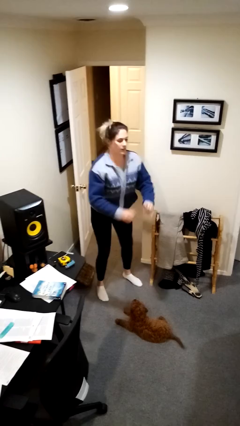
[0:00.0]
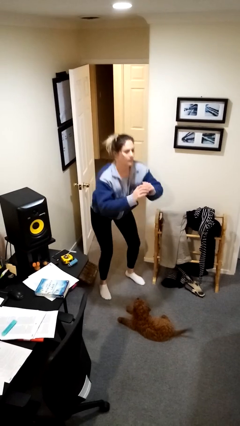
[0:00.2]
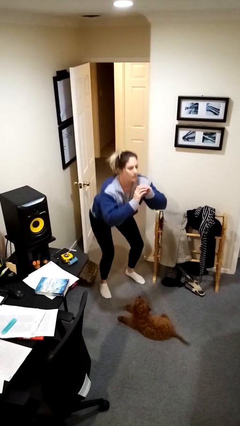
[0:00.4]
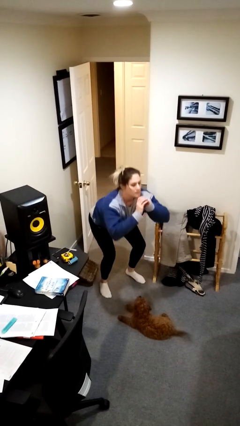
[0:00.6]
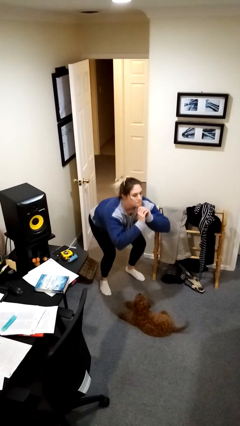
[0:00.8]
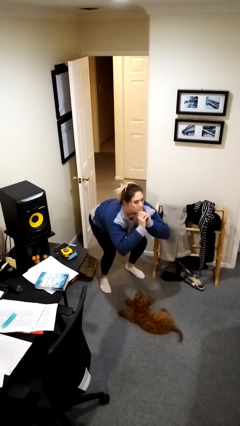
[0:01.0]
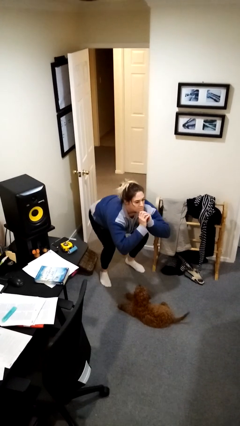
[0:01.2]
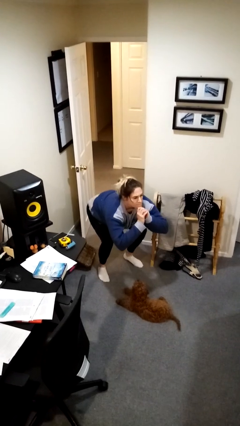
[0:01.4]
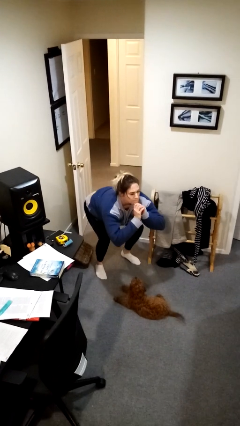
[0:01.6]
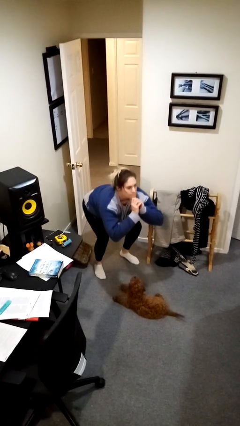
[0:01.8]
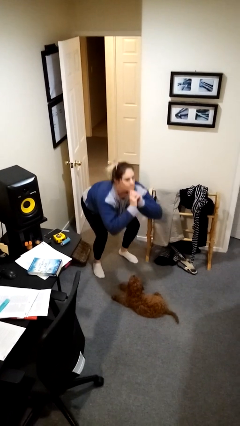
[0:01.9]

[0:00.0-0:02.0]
person squats

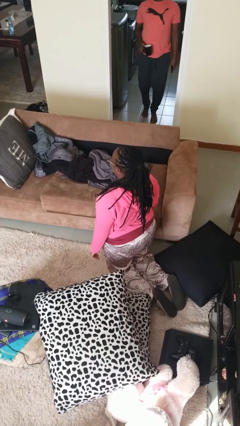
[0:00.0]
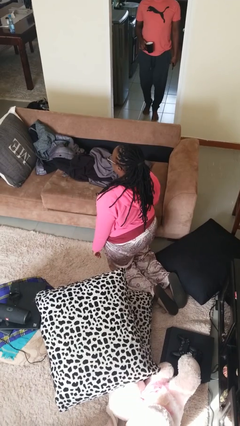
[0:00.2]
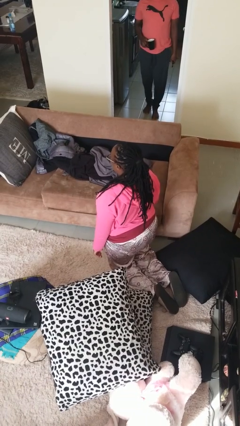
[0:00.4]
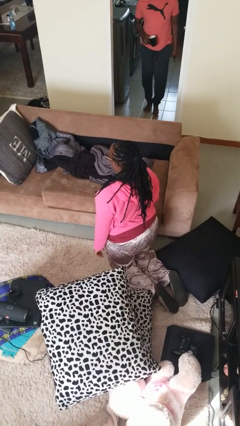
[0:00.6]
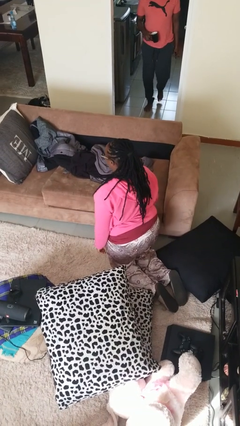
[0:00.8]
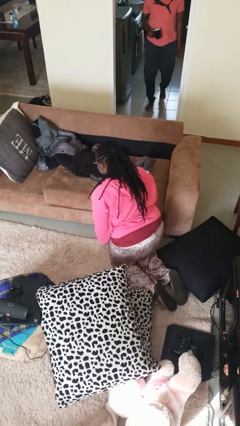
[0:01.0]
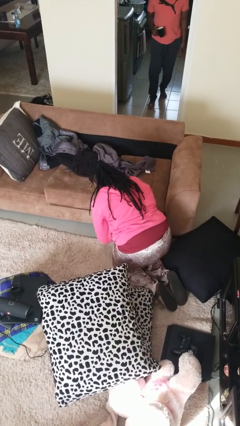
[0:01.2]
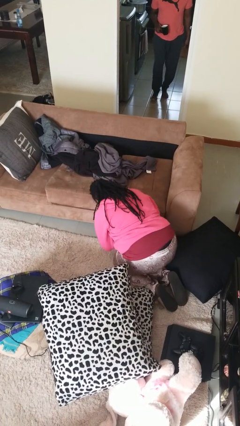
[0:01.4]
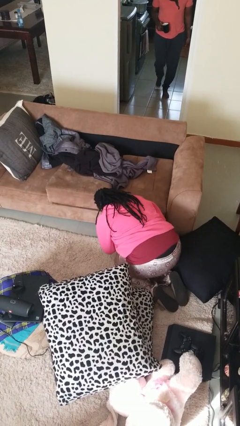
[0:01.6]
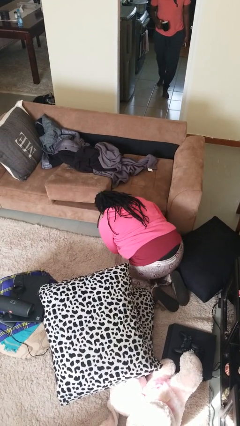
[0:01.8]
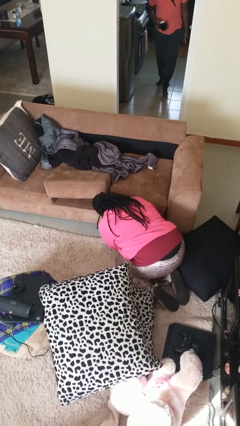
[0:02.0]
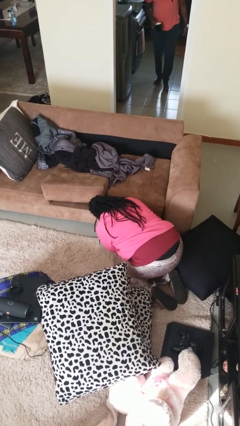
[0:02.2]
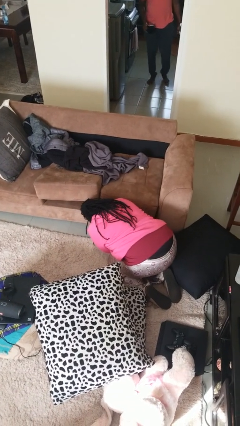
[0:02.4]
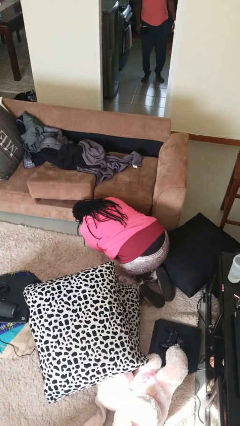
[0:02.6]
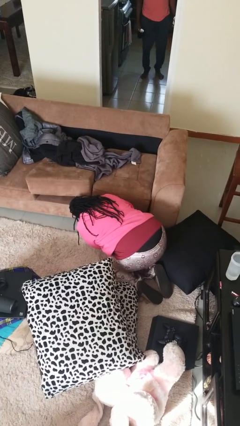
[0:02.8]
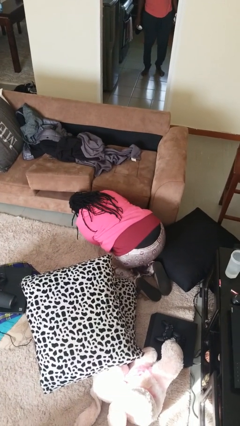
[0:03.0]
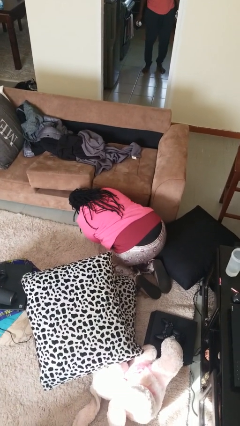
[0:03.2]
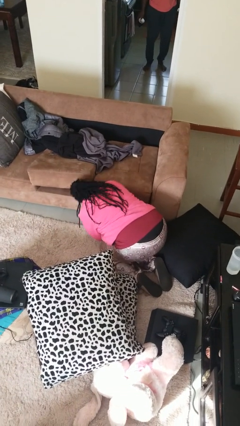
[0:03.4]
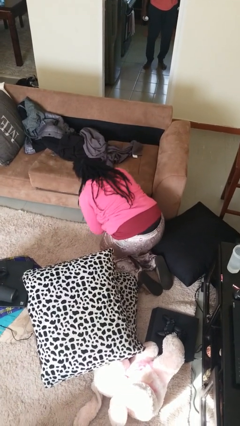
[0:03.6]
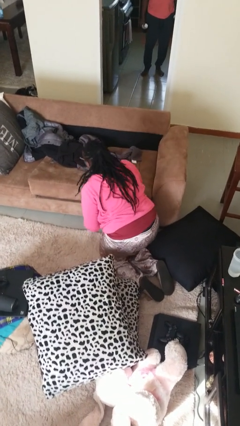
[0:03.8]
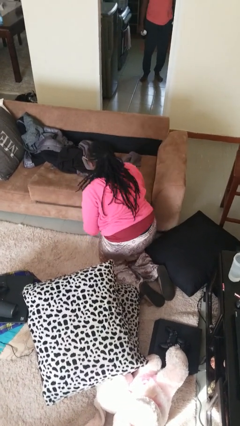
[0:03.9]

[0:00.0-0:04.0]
person searches under couch

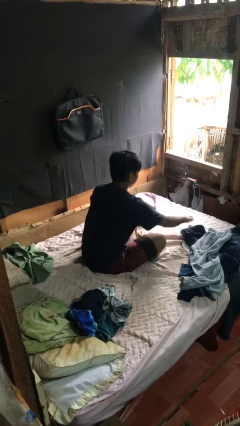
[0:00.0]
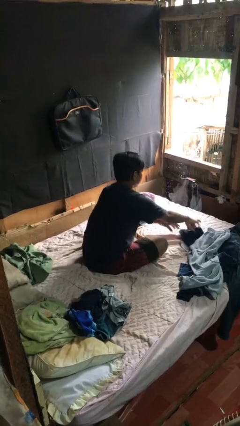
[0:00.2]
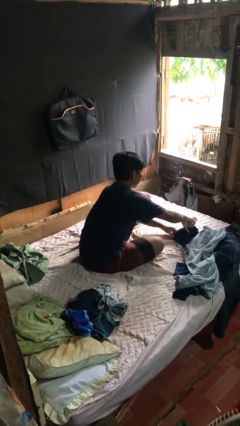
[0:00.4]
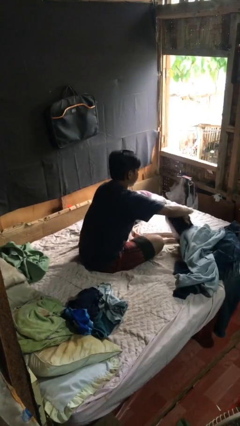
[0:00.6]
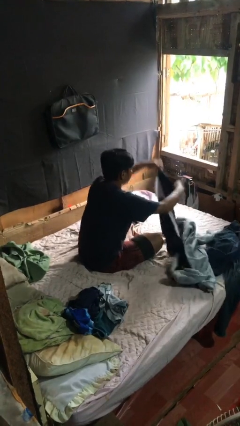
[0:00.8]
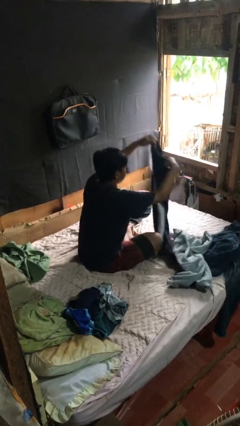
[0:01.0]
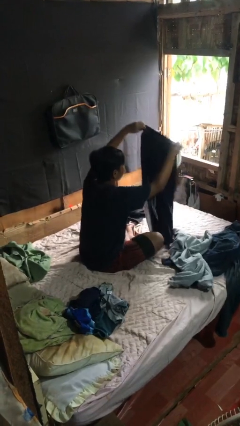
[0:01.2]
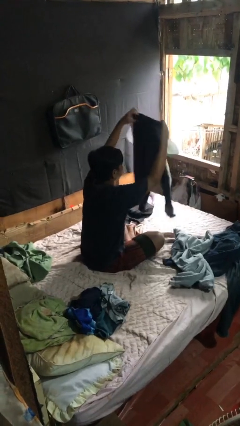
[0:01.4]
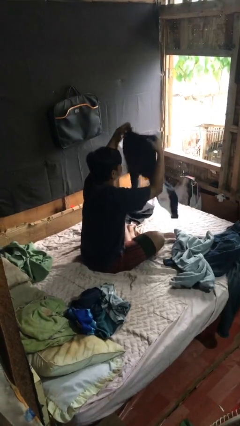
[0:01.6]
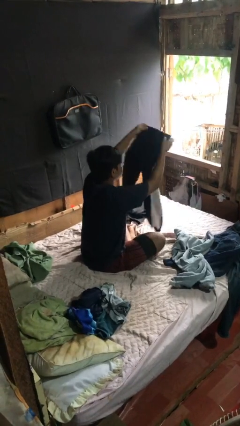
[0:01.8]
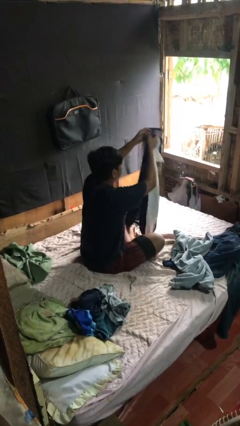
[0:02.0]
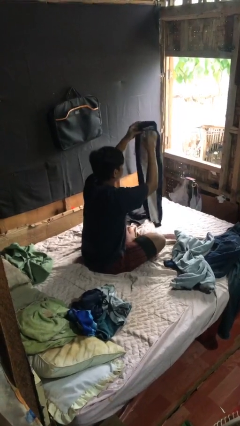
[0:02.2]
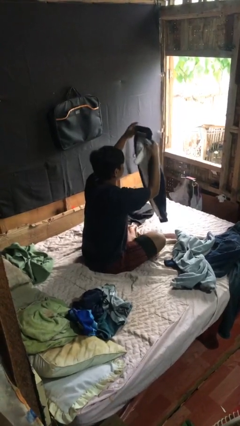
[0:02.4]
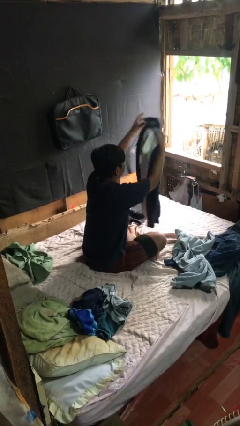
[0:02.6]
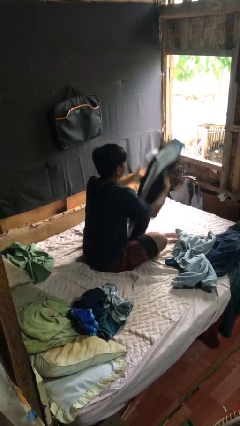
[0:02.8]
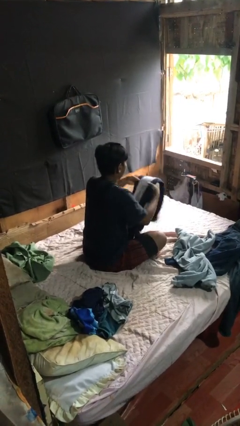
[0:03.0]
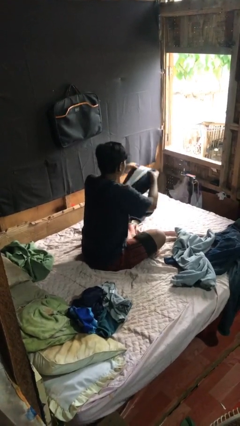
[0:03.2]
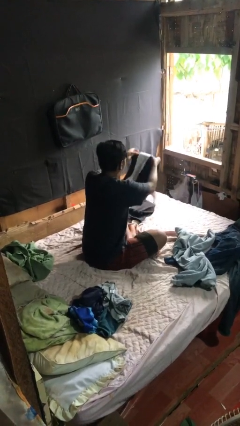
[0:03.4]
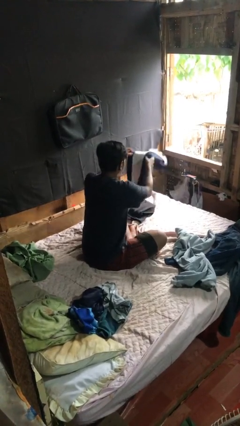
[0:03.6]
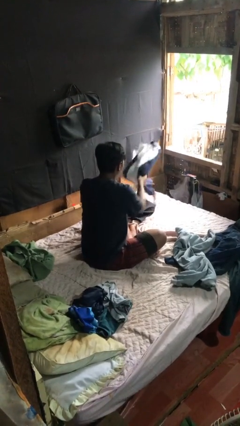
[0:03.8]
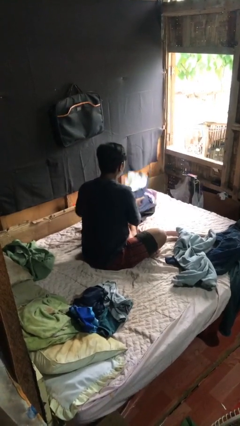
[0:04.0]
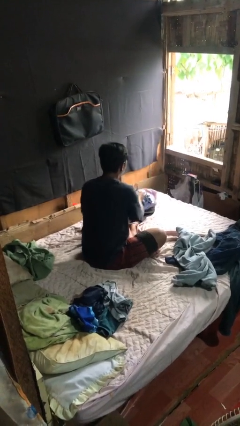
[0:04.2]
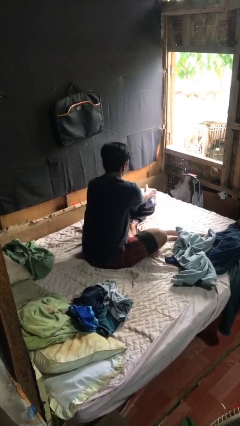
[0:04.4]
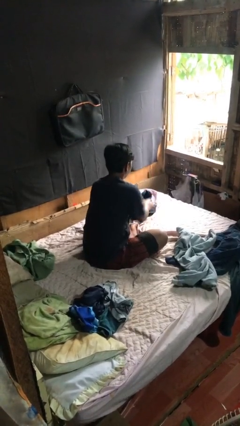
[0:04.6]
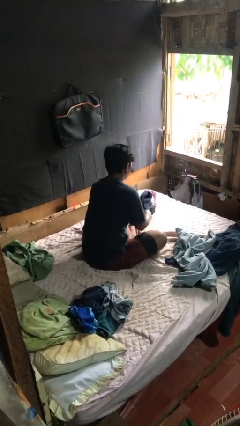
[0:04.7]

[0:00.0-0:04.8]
person folds pants

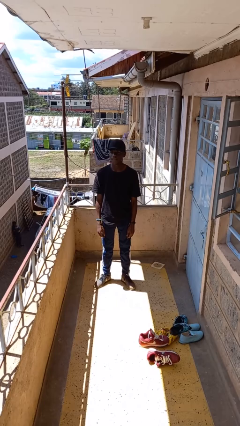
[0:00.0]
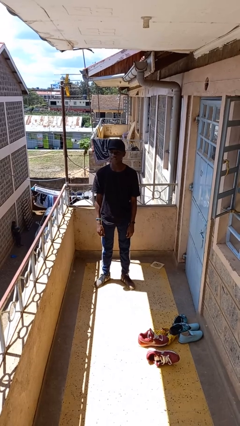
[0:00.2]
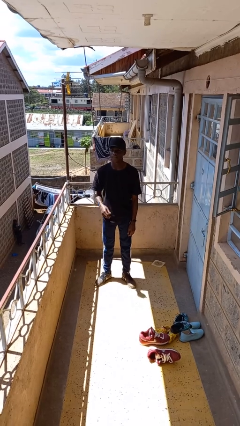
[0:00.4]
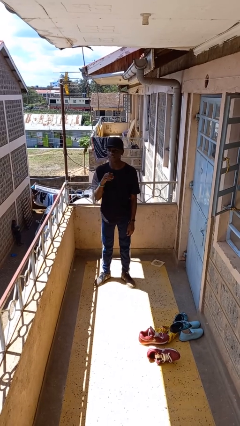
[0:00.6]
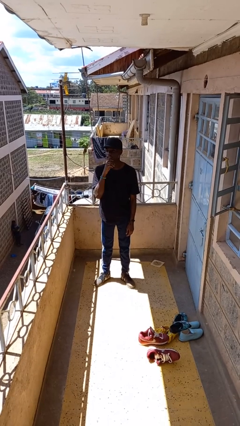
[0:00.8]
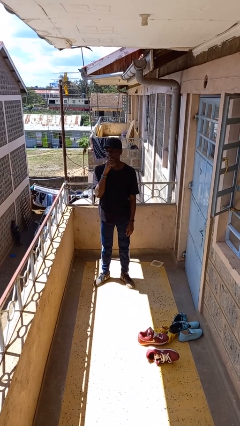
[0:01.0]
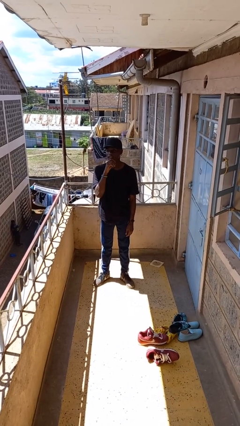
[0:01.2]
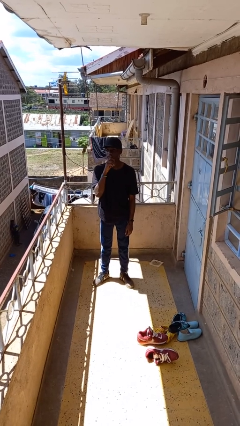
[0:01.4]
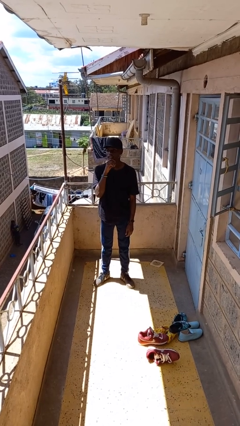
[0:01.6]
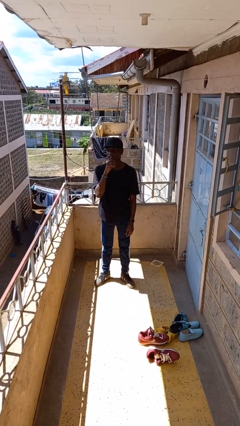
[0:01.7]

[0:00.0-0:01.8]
person strokes chin

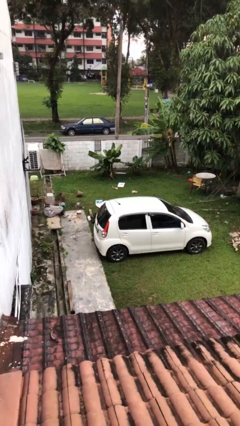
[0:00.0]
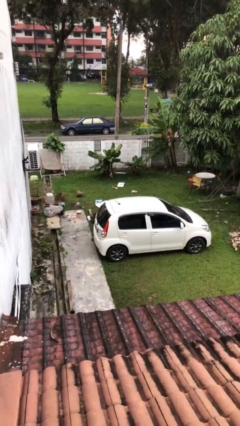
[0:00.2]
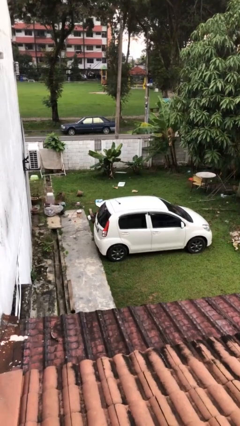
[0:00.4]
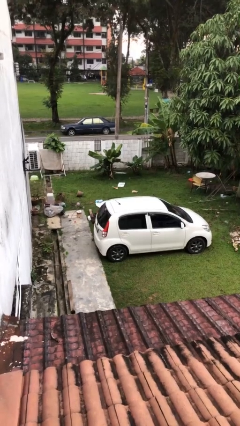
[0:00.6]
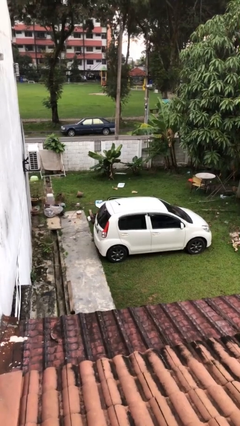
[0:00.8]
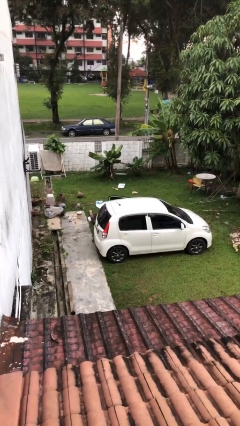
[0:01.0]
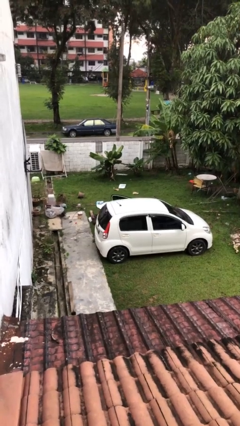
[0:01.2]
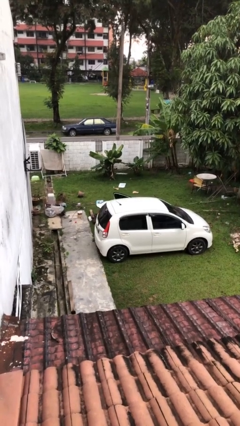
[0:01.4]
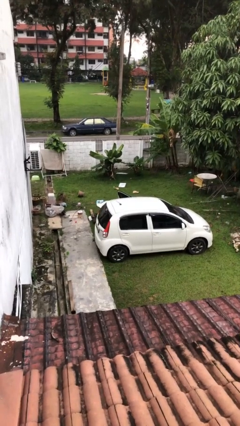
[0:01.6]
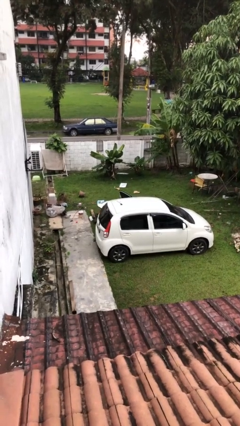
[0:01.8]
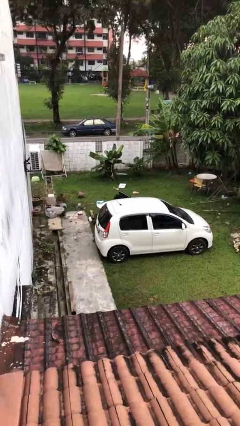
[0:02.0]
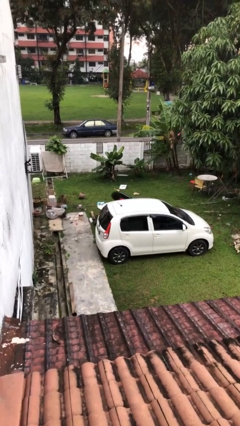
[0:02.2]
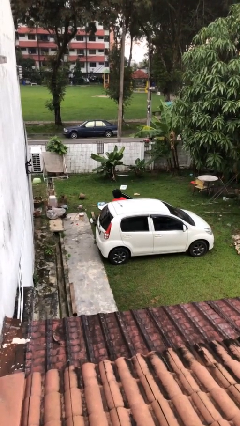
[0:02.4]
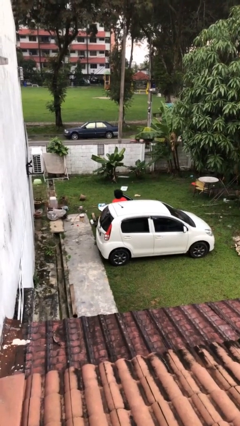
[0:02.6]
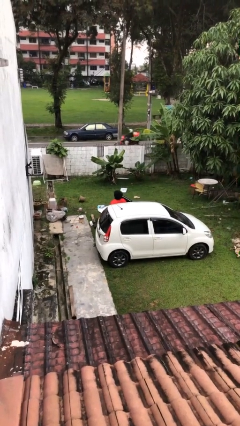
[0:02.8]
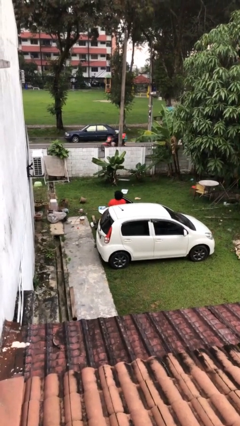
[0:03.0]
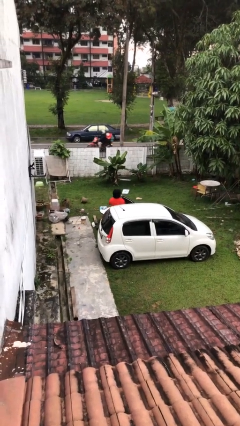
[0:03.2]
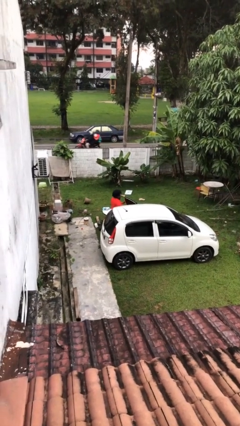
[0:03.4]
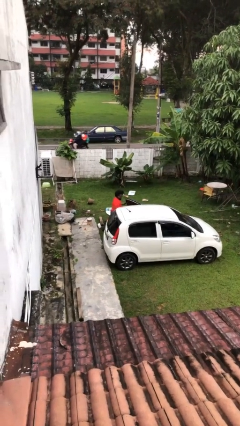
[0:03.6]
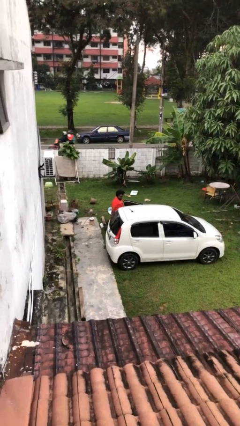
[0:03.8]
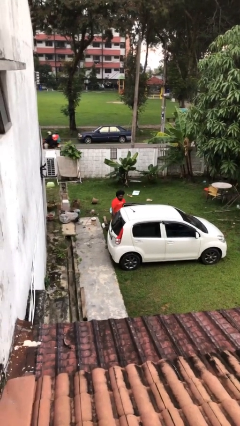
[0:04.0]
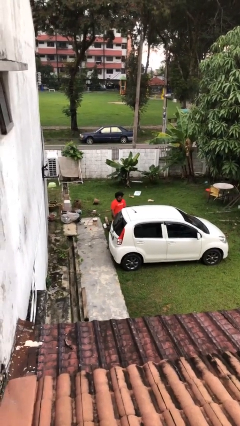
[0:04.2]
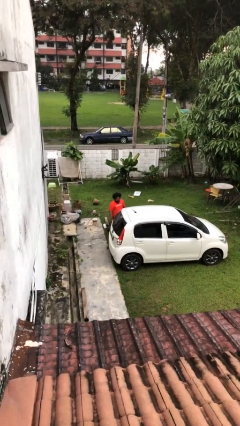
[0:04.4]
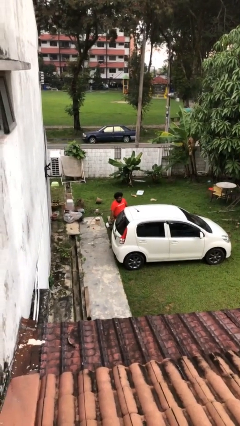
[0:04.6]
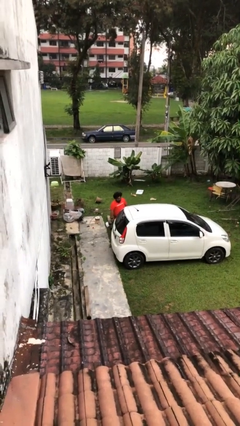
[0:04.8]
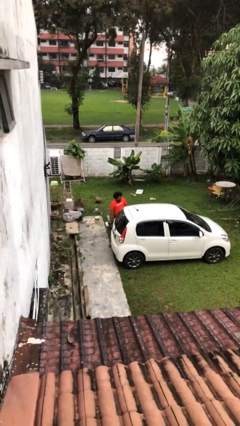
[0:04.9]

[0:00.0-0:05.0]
car drops off person
